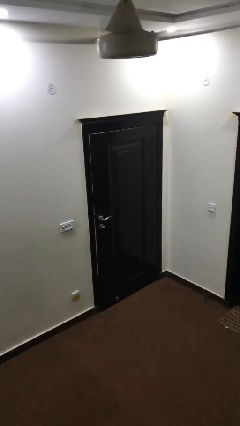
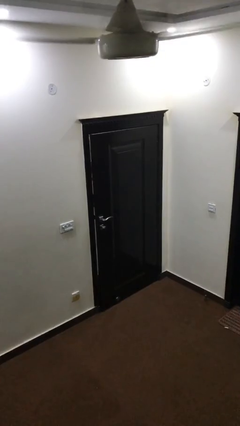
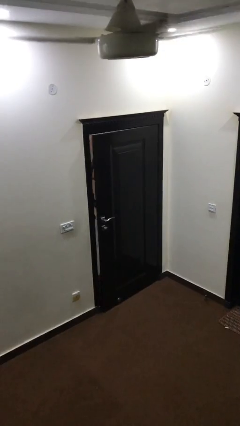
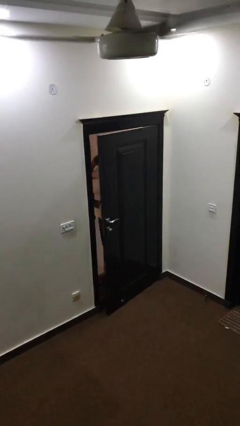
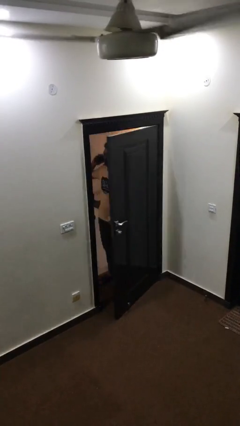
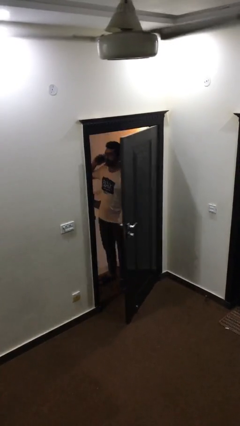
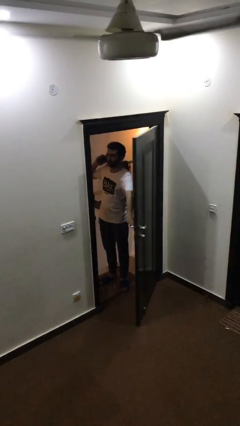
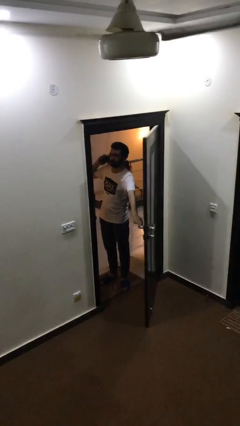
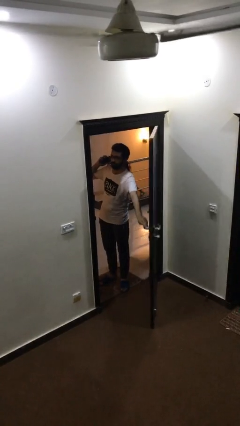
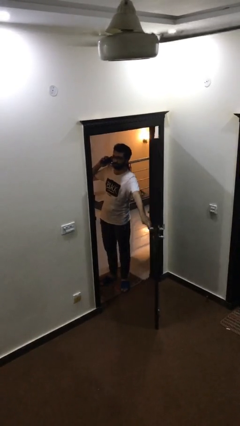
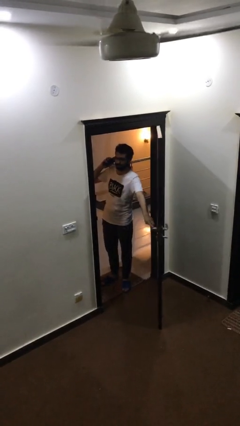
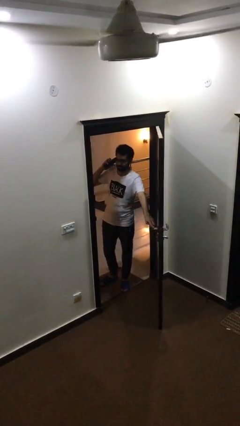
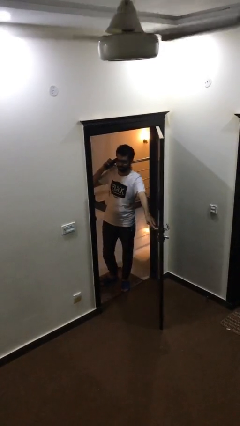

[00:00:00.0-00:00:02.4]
person opens facility door

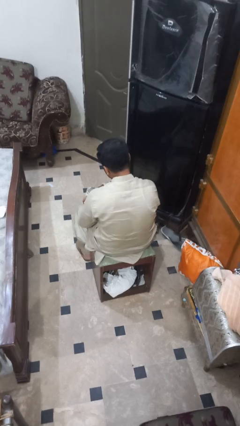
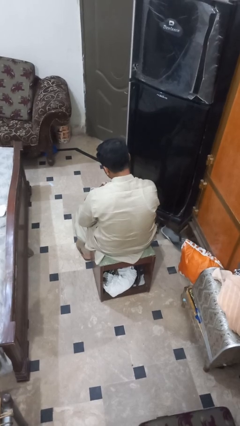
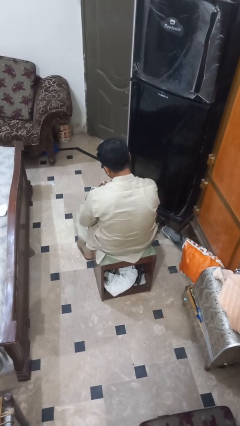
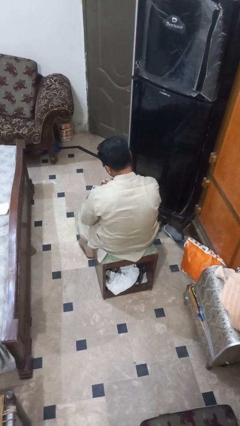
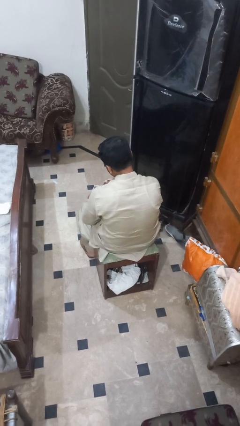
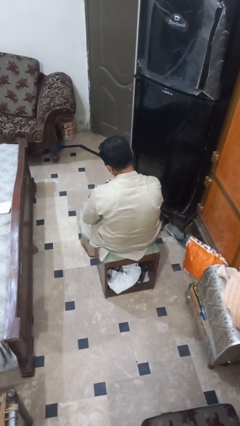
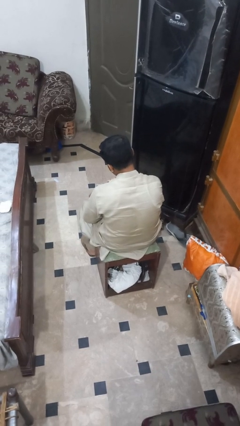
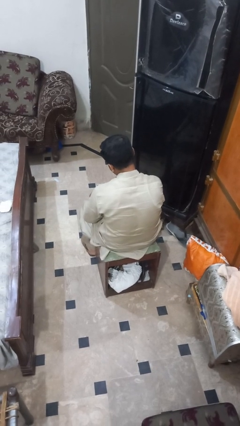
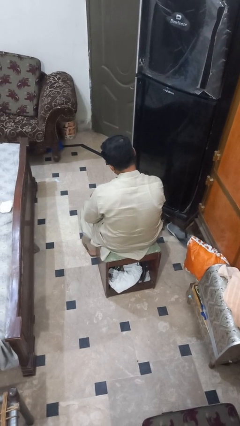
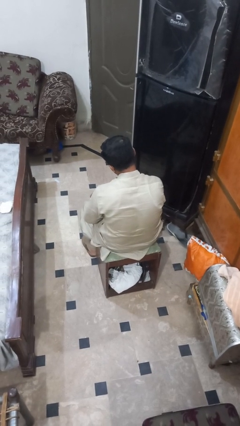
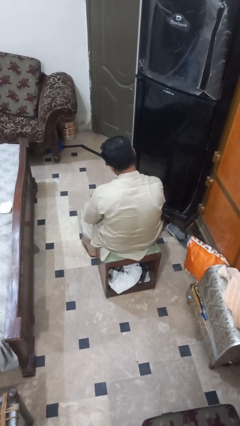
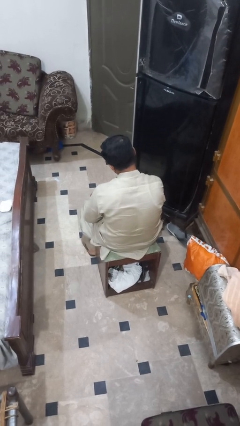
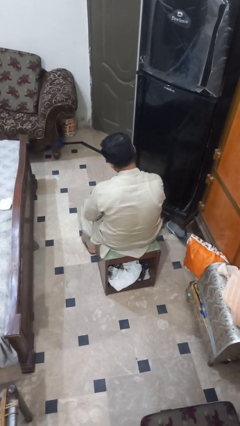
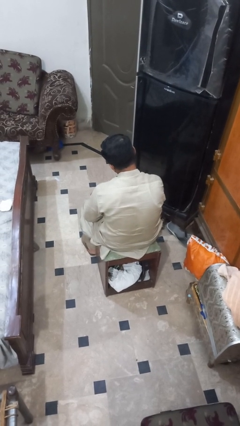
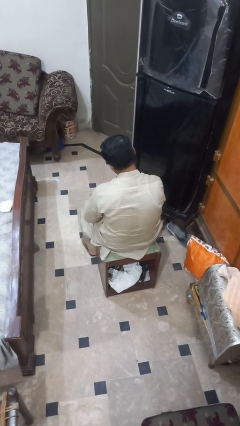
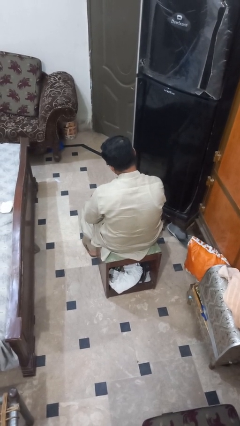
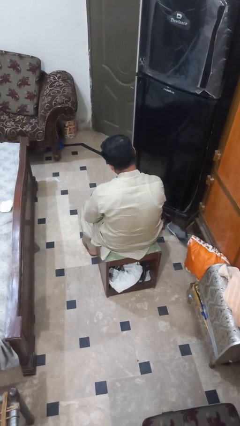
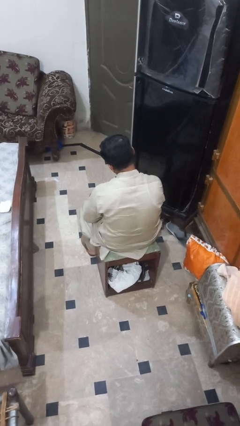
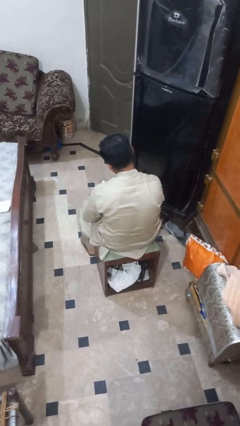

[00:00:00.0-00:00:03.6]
person stirs mug

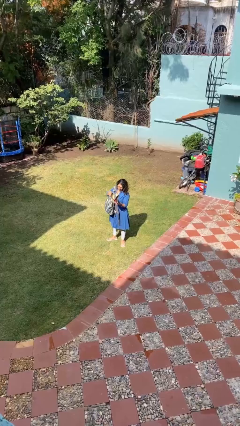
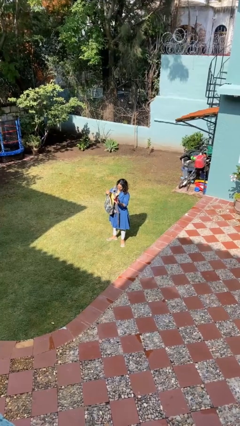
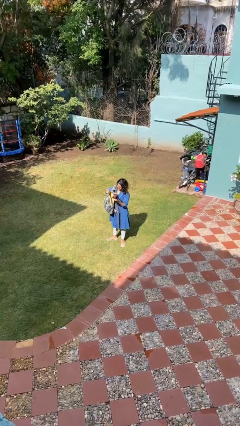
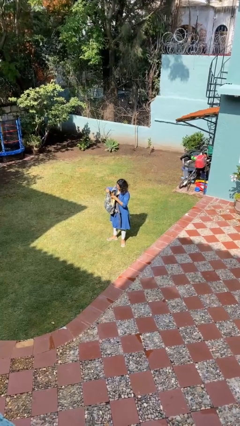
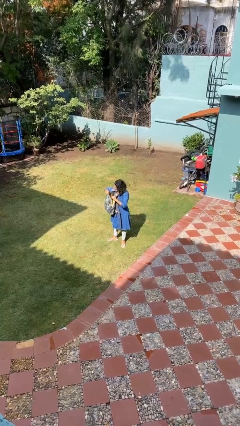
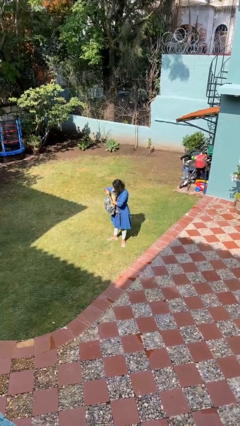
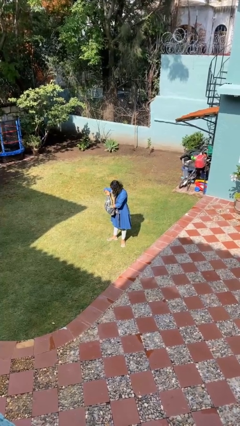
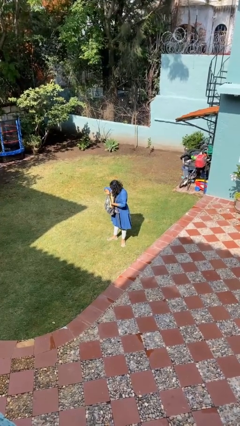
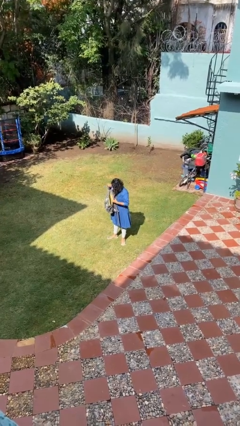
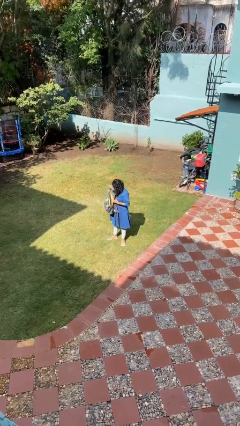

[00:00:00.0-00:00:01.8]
person puts object into backpack

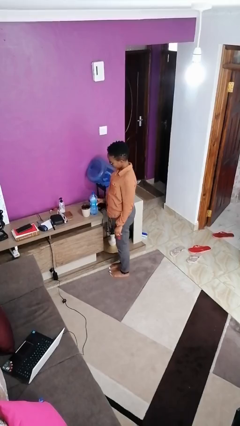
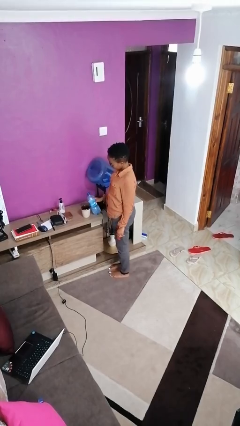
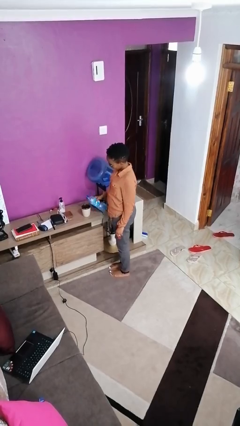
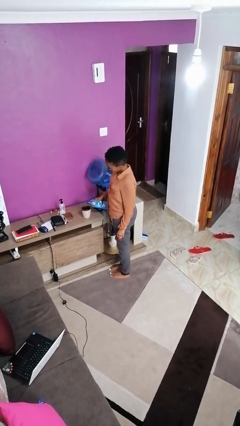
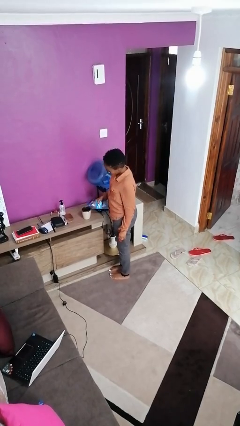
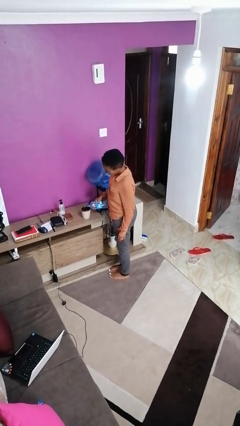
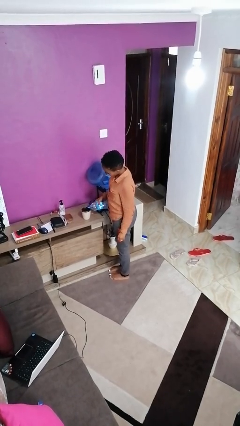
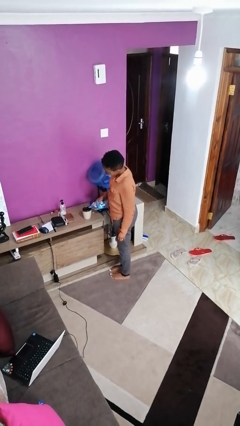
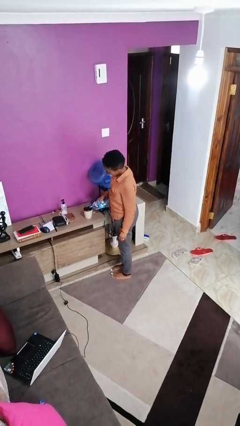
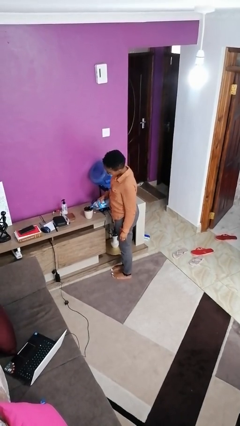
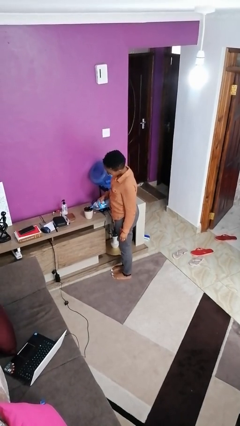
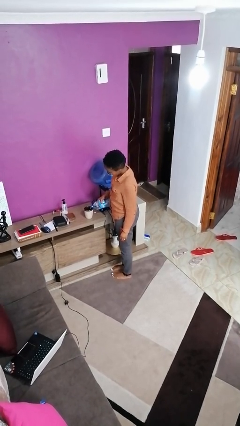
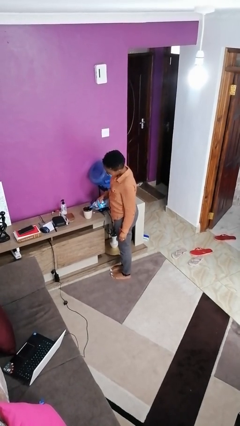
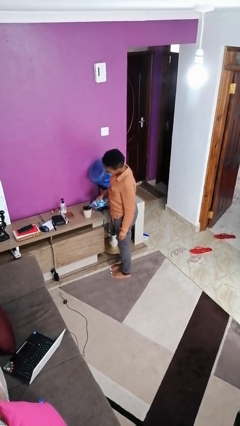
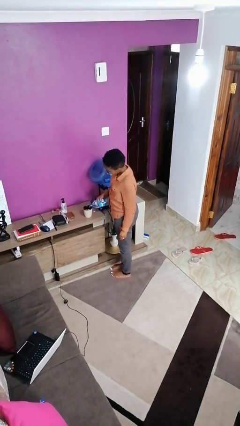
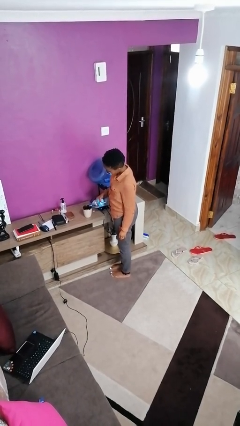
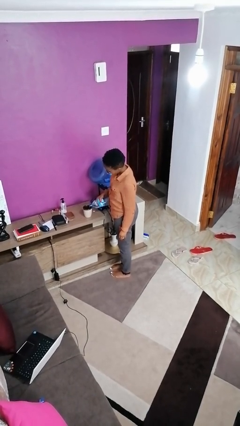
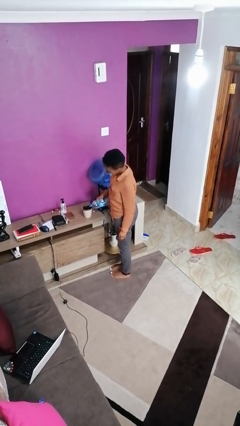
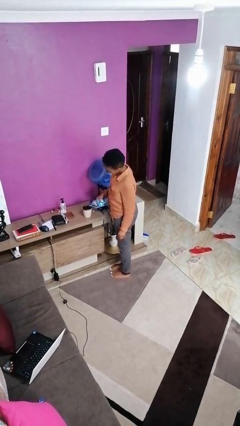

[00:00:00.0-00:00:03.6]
person pours liquid into cup

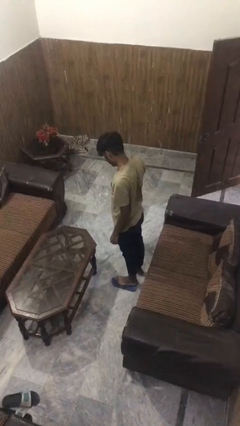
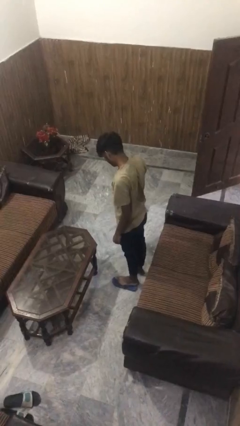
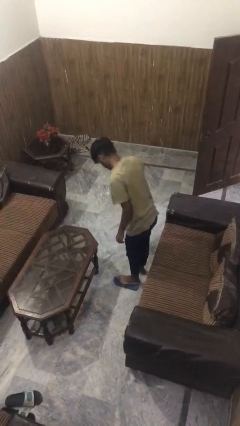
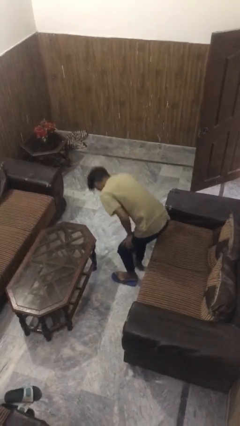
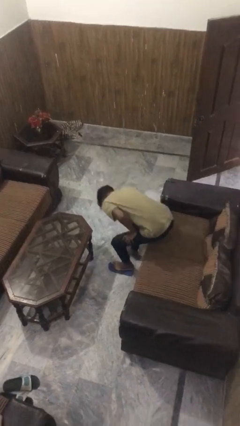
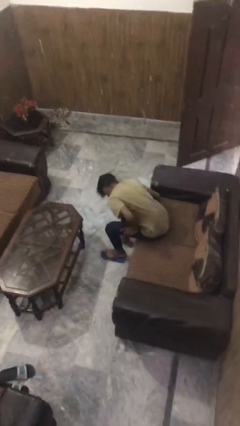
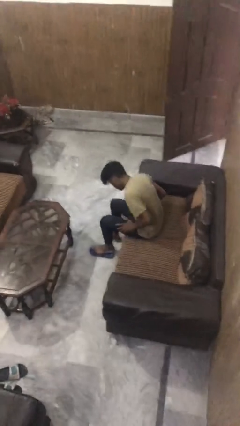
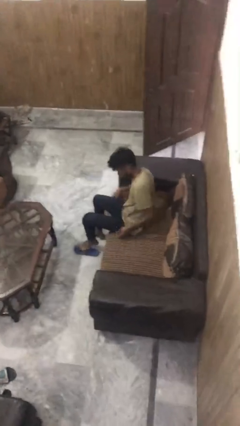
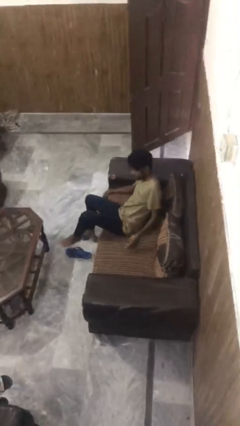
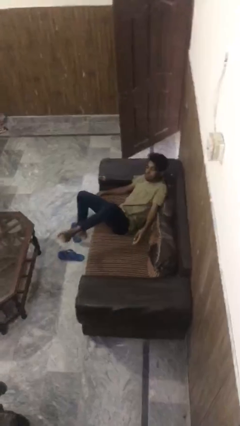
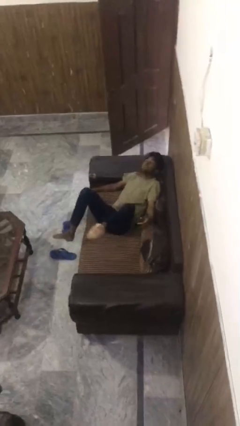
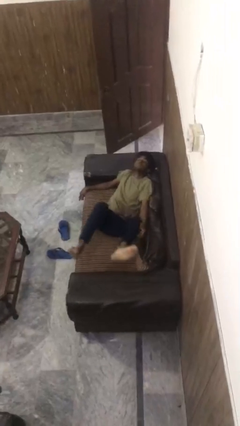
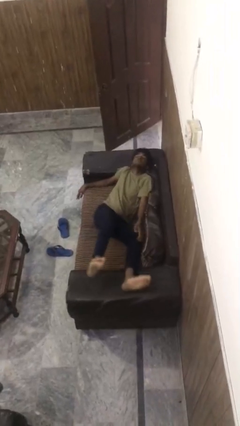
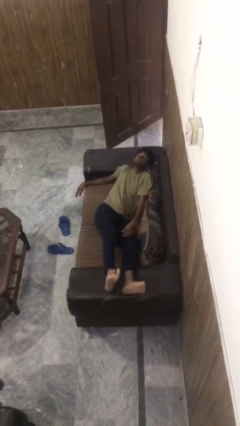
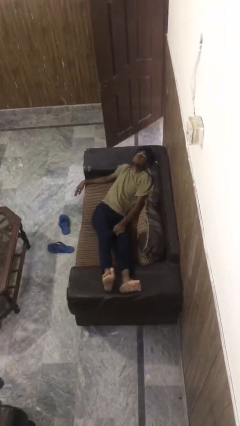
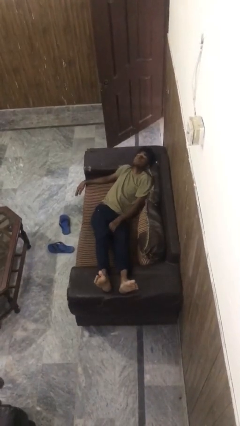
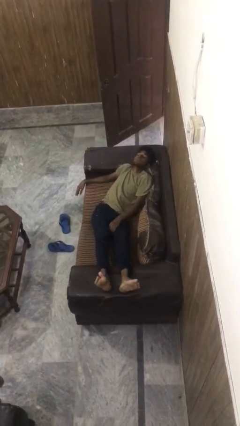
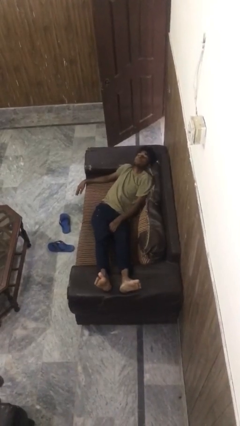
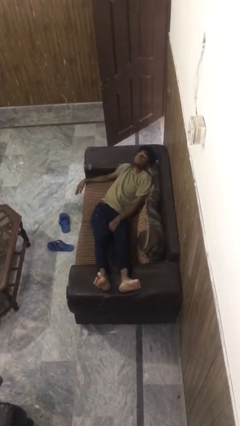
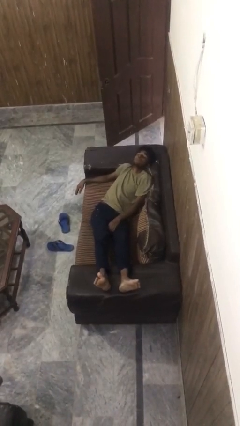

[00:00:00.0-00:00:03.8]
person lies down on couch

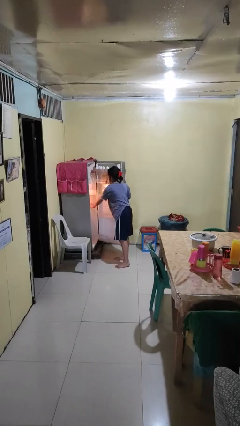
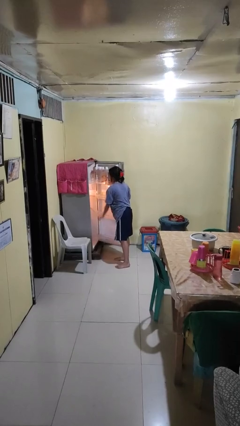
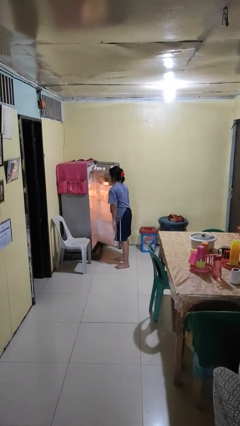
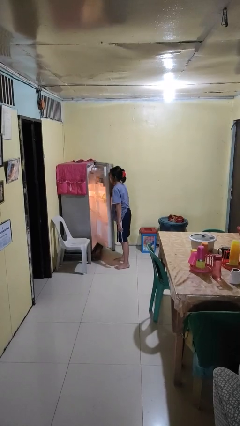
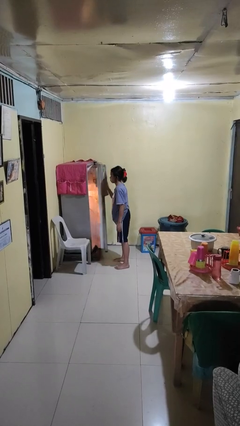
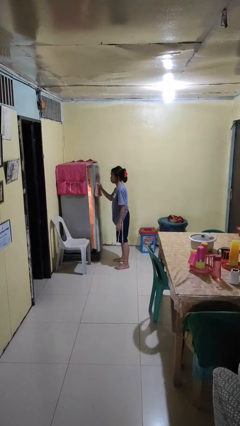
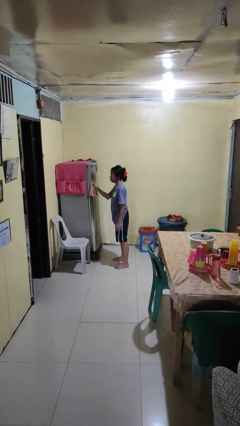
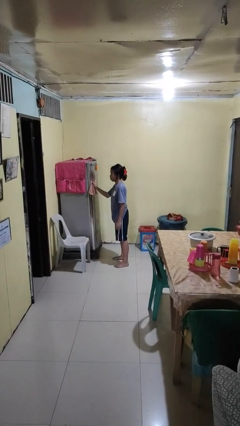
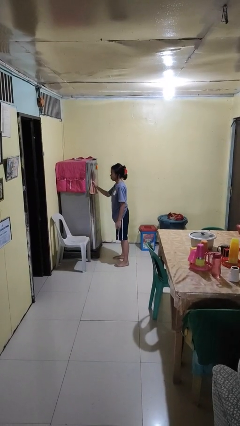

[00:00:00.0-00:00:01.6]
person closes refrigerator

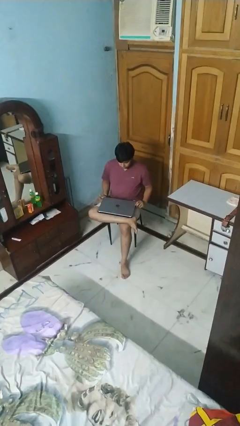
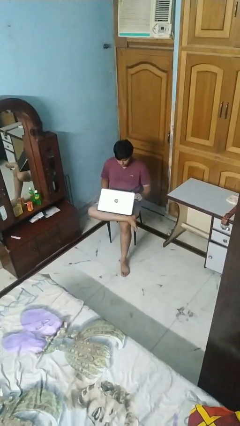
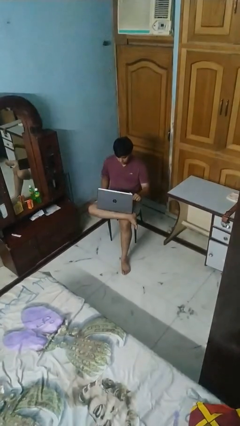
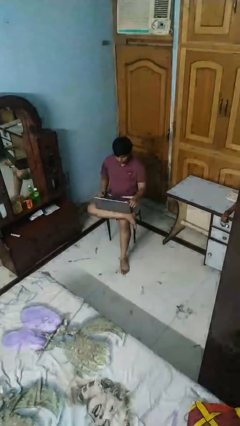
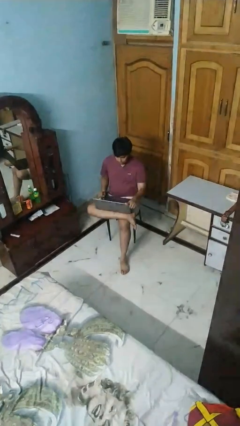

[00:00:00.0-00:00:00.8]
person opens laptop
